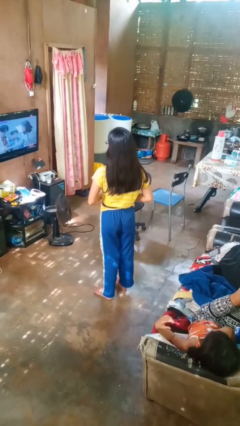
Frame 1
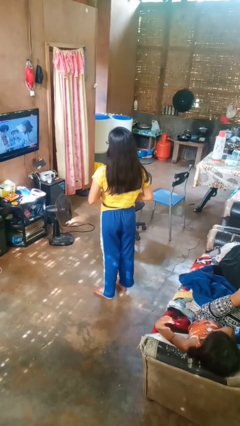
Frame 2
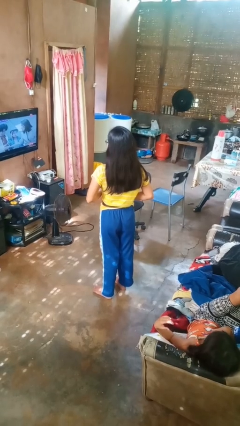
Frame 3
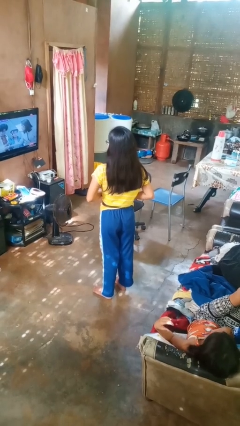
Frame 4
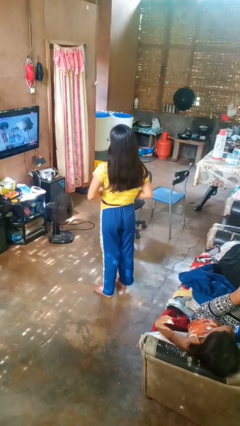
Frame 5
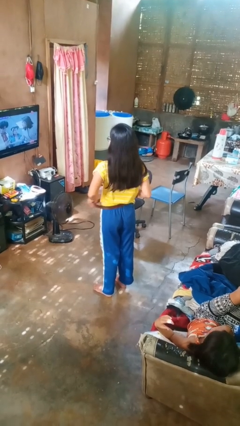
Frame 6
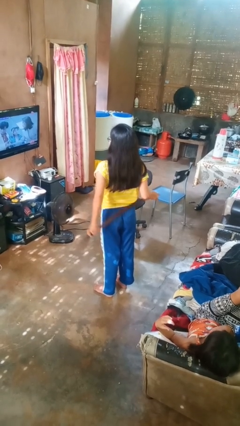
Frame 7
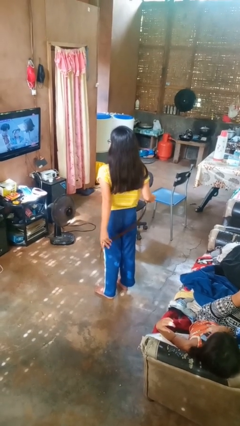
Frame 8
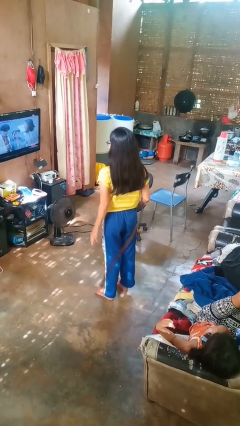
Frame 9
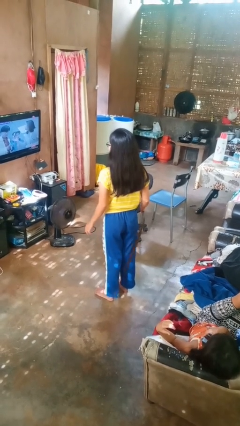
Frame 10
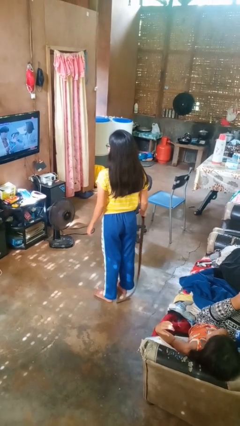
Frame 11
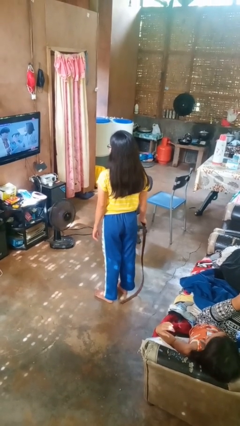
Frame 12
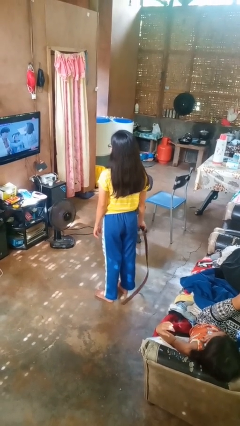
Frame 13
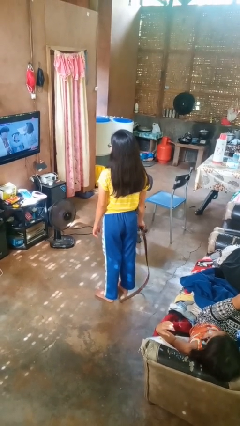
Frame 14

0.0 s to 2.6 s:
person takes off belt

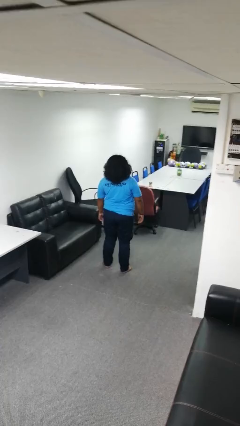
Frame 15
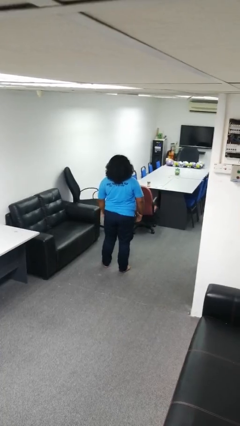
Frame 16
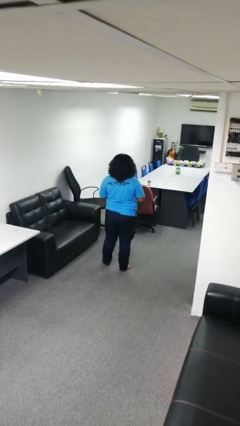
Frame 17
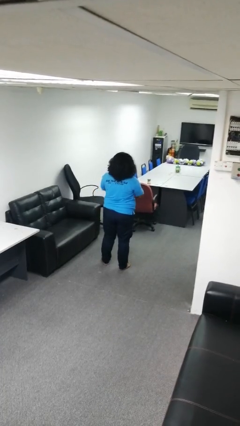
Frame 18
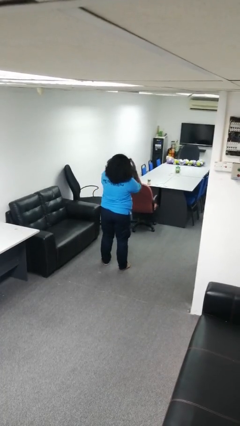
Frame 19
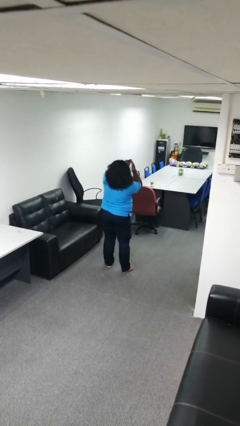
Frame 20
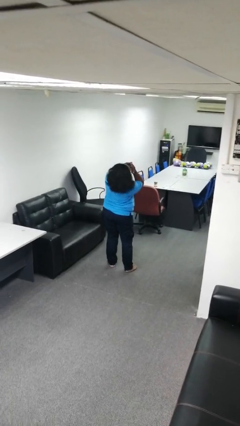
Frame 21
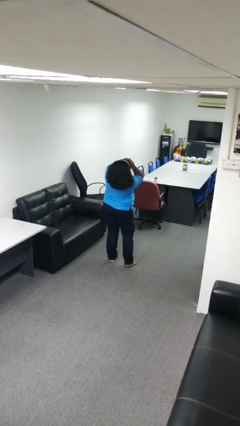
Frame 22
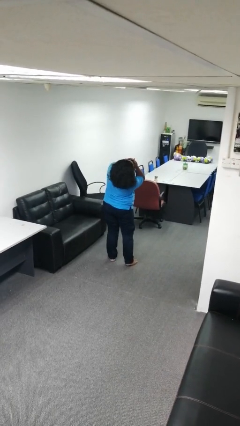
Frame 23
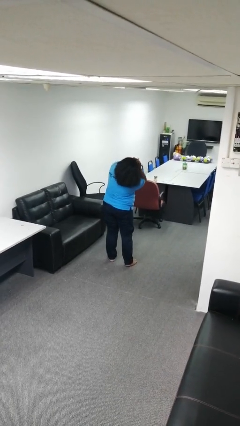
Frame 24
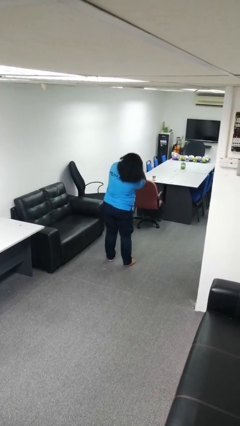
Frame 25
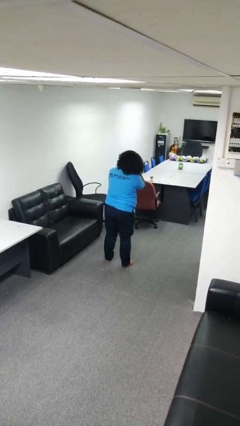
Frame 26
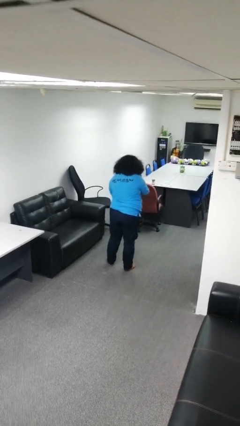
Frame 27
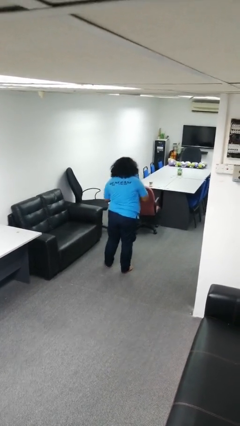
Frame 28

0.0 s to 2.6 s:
person covers face with hands

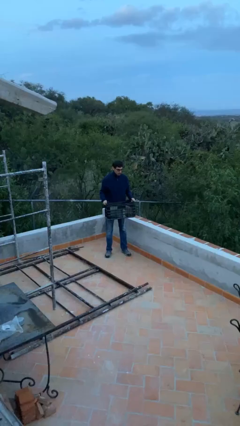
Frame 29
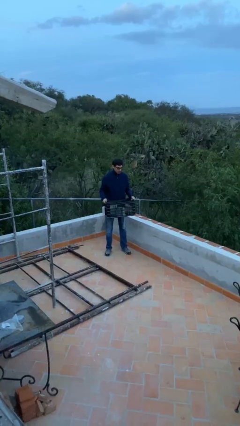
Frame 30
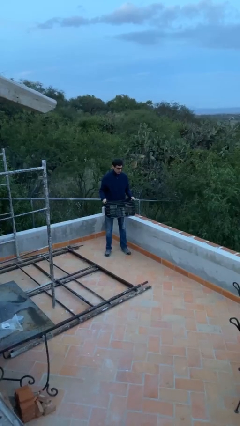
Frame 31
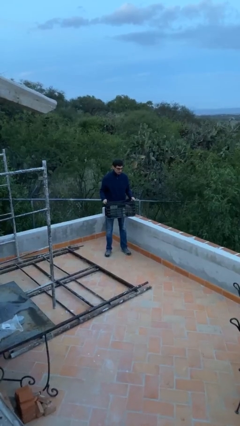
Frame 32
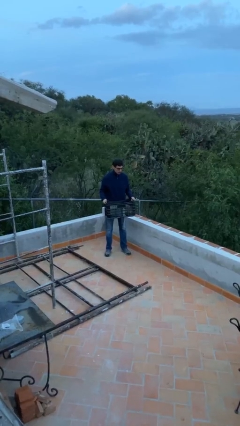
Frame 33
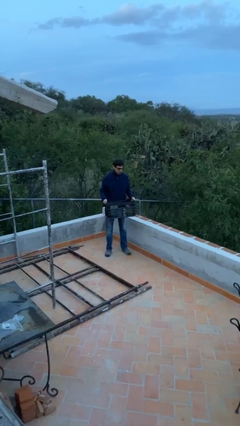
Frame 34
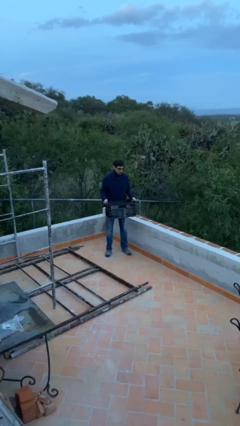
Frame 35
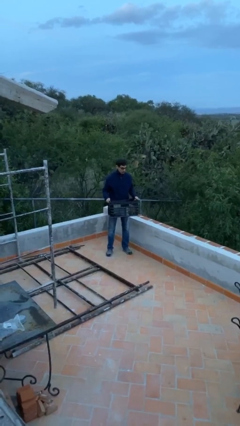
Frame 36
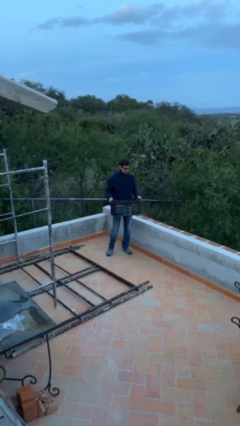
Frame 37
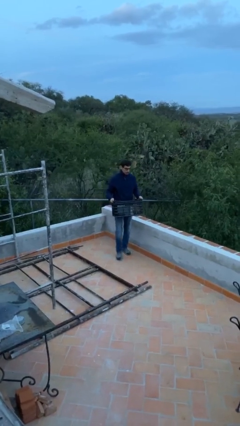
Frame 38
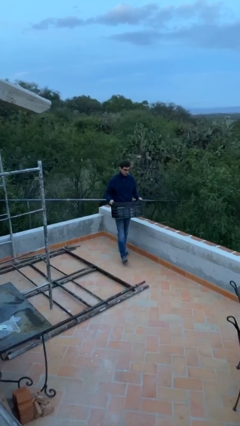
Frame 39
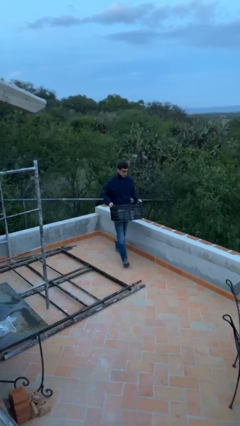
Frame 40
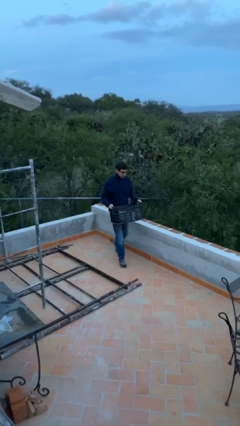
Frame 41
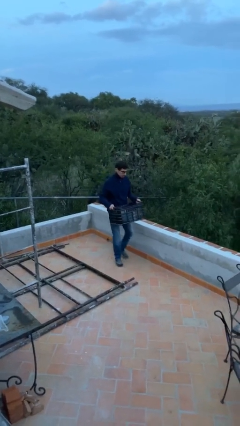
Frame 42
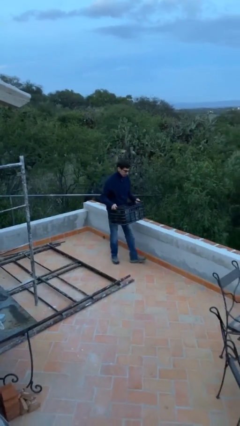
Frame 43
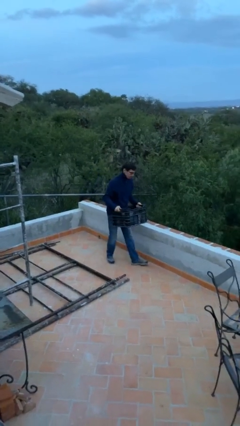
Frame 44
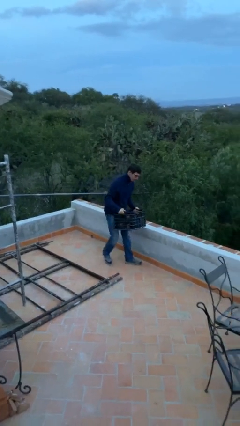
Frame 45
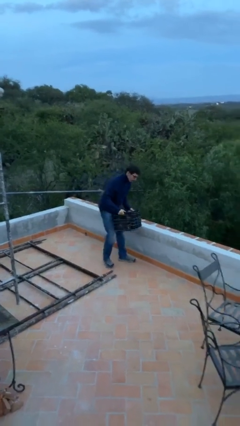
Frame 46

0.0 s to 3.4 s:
person carries heavy object

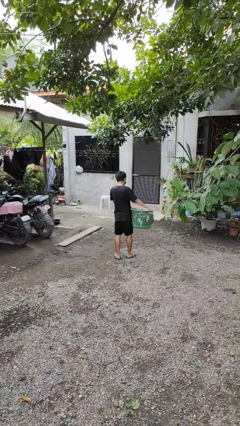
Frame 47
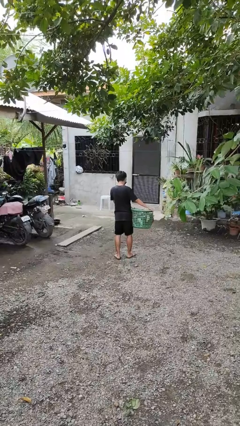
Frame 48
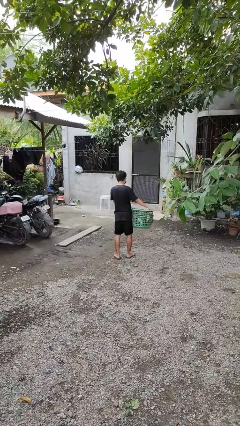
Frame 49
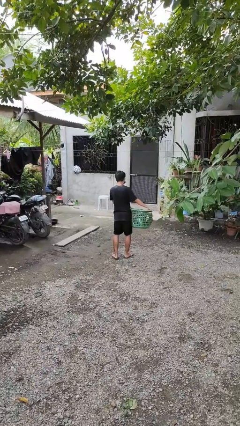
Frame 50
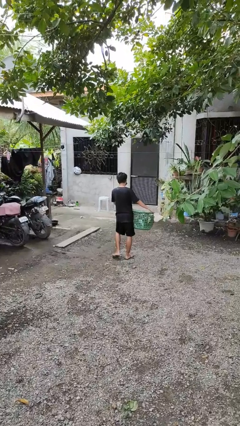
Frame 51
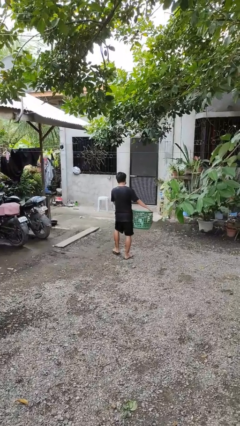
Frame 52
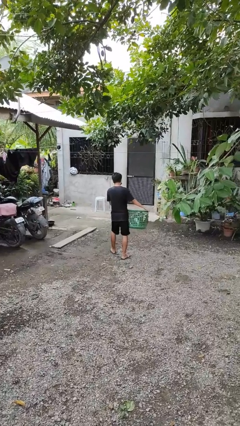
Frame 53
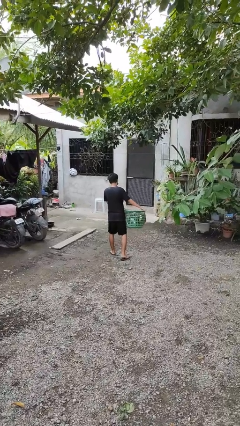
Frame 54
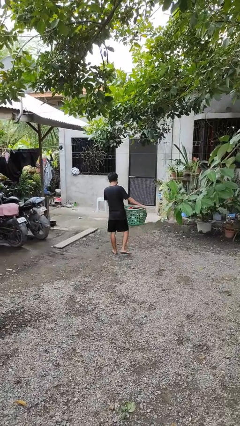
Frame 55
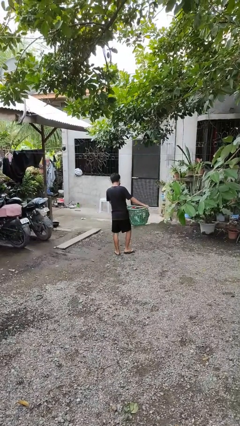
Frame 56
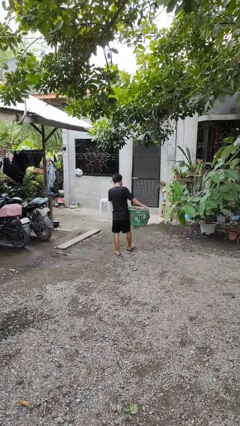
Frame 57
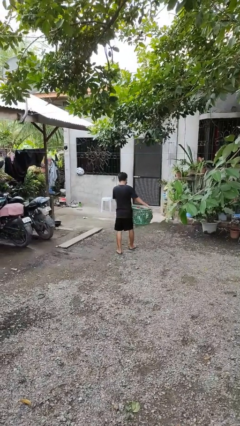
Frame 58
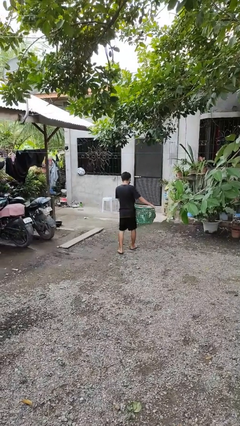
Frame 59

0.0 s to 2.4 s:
person carries laundry basket

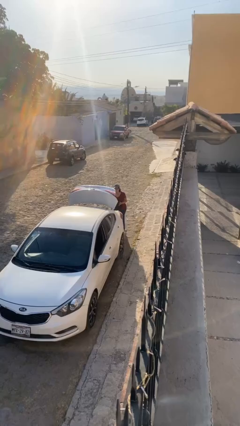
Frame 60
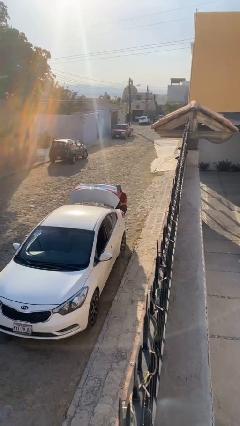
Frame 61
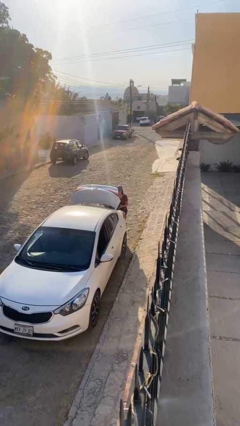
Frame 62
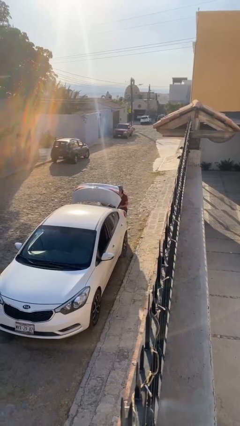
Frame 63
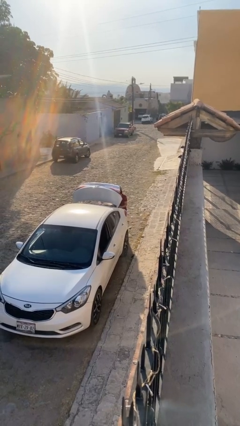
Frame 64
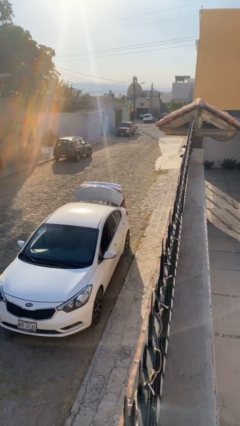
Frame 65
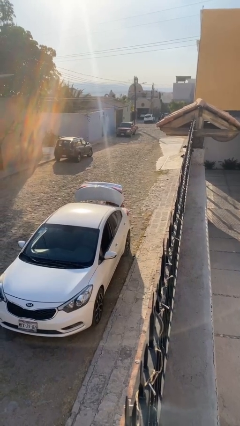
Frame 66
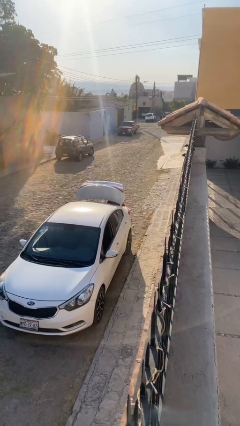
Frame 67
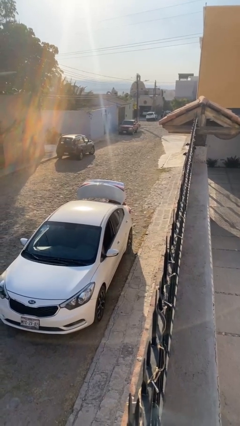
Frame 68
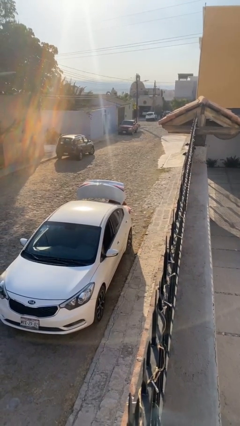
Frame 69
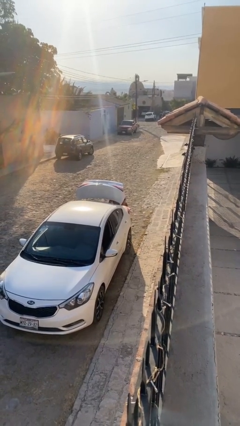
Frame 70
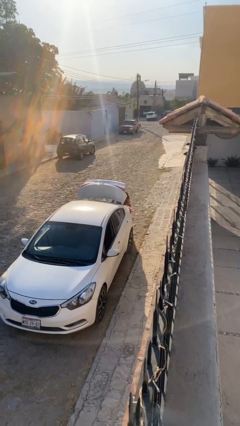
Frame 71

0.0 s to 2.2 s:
person loads car

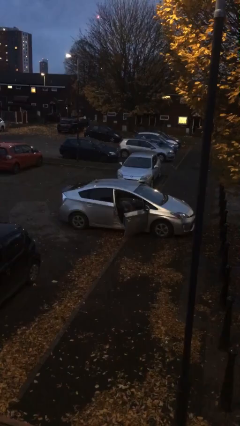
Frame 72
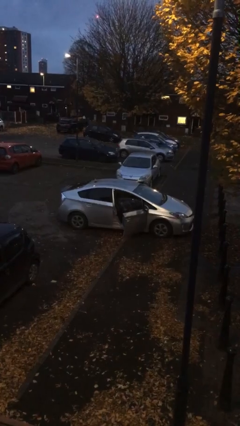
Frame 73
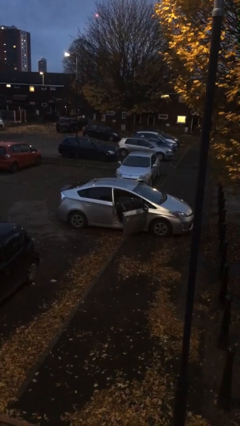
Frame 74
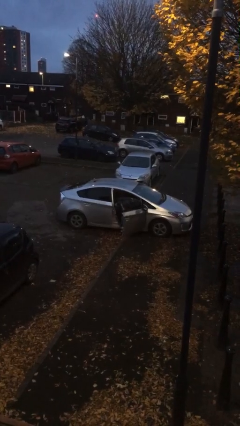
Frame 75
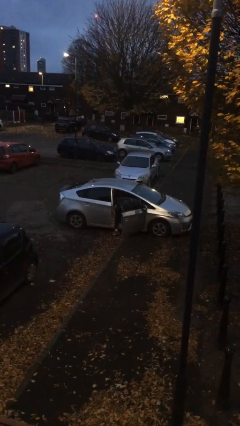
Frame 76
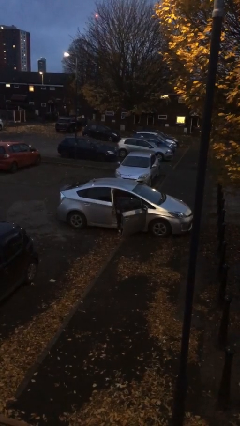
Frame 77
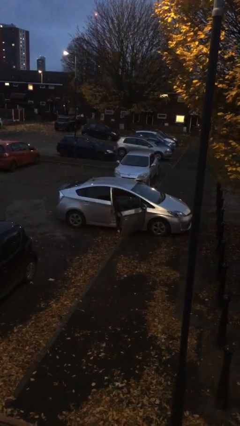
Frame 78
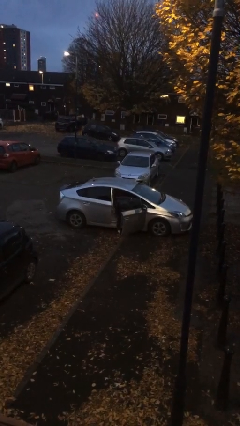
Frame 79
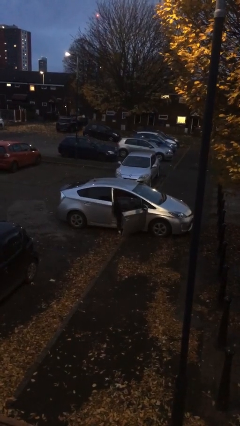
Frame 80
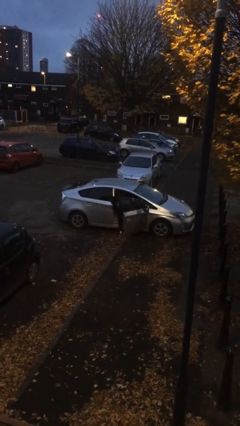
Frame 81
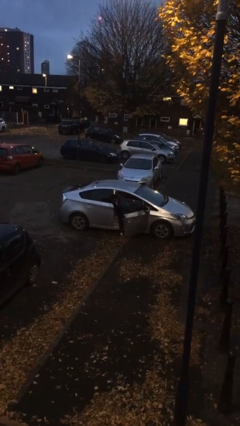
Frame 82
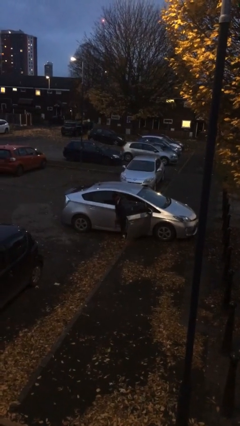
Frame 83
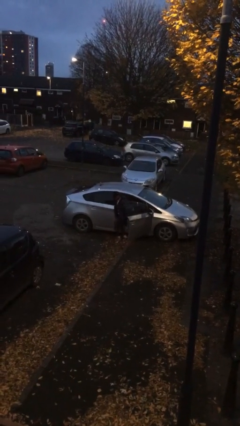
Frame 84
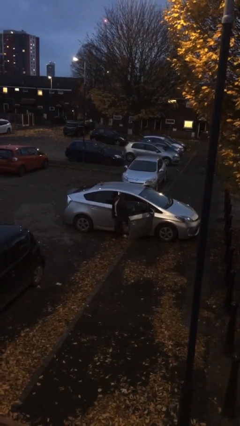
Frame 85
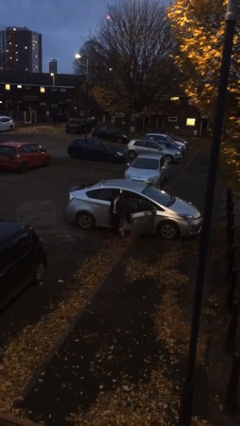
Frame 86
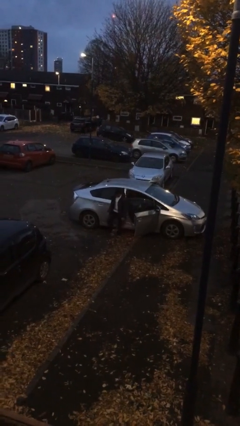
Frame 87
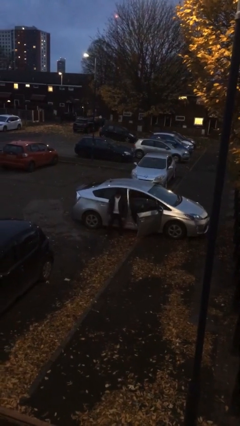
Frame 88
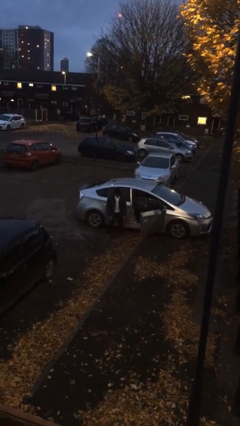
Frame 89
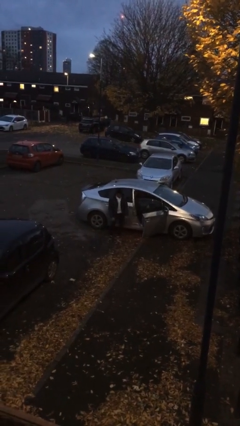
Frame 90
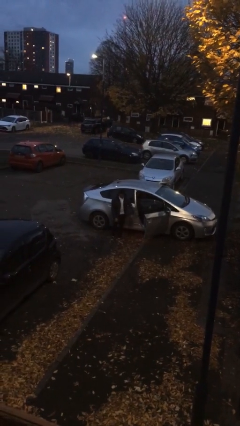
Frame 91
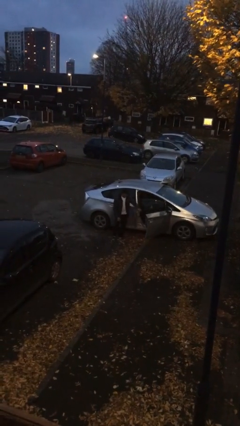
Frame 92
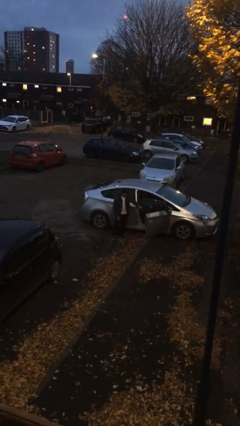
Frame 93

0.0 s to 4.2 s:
person exits car
